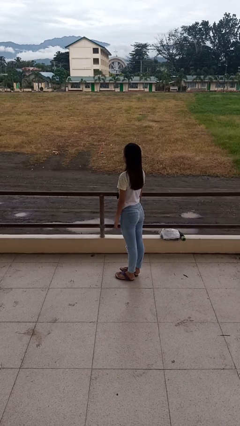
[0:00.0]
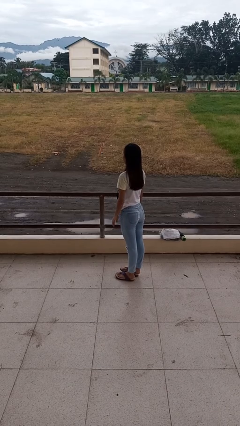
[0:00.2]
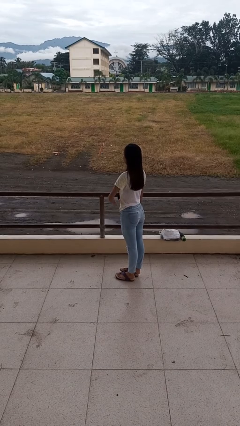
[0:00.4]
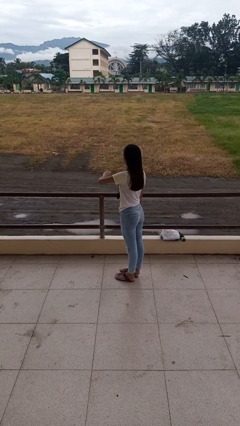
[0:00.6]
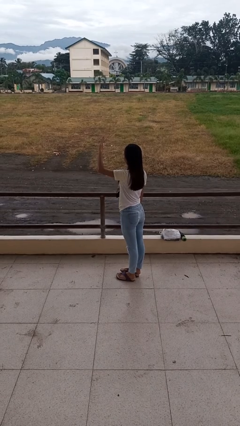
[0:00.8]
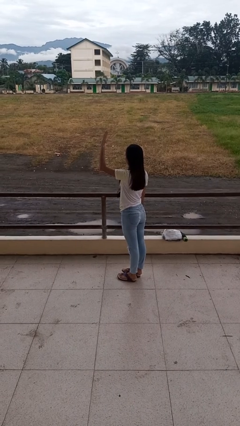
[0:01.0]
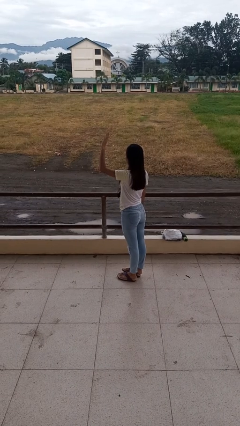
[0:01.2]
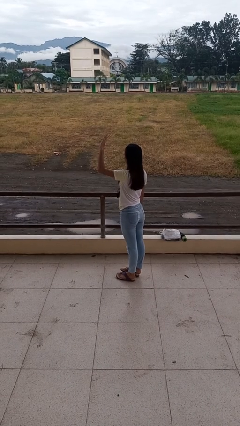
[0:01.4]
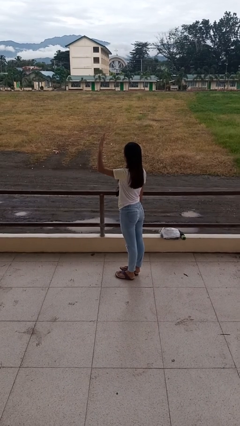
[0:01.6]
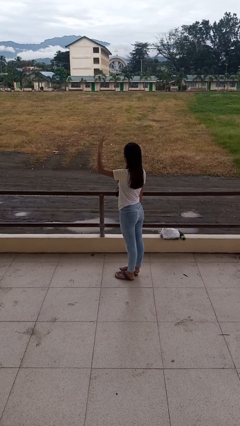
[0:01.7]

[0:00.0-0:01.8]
person gestures swipe up

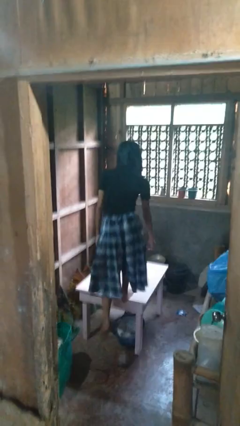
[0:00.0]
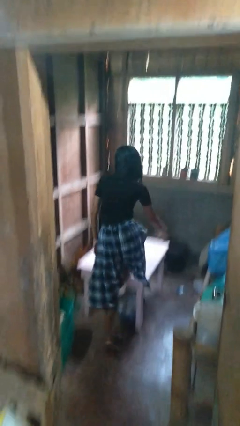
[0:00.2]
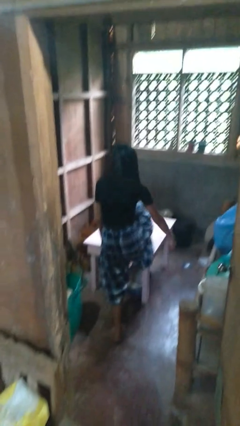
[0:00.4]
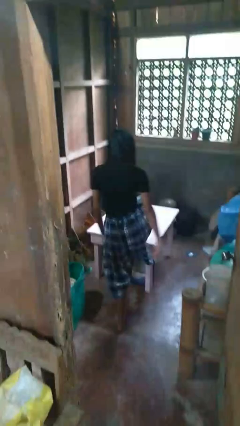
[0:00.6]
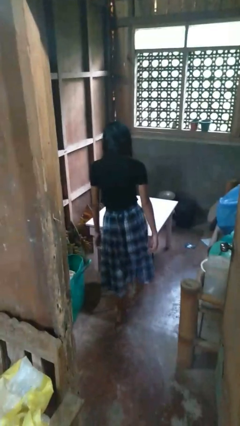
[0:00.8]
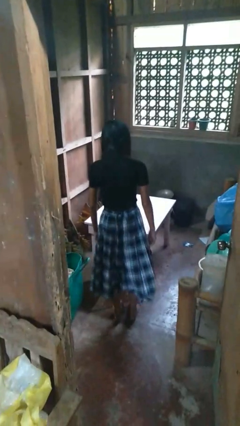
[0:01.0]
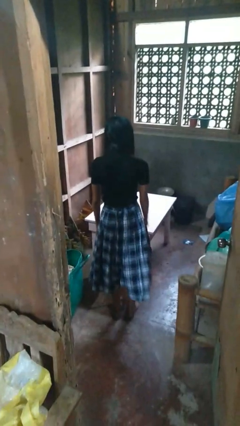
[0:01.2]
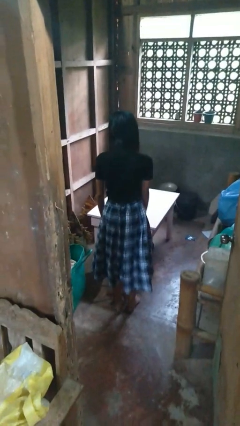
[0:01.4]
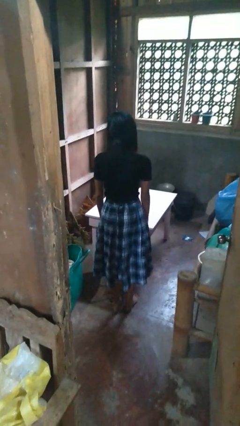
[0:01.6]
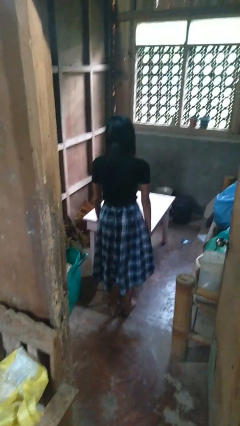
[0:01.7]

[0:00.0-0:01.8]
person climbs off table

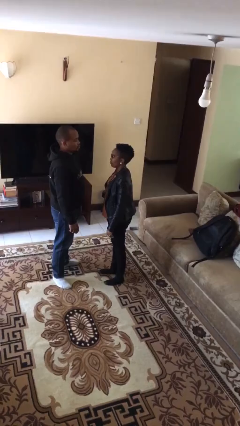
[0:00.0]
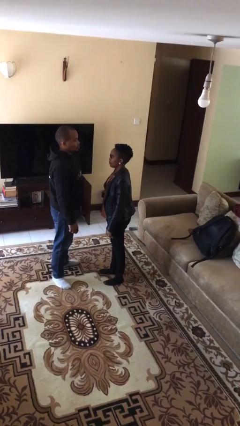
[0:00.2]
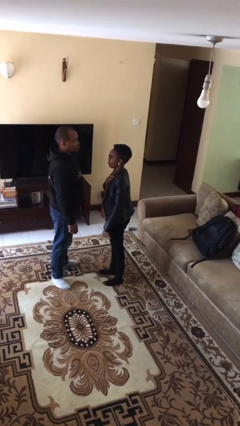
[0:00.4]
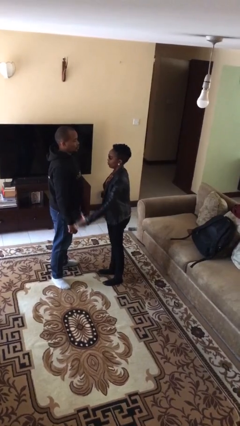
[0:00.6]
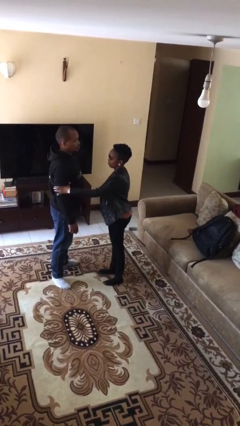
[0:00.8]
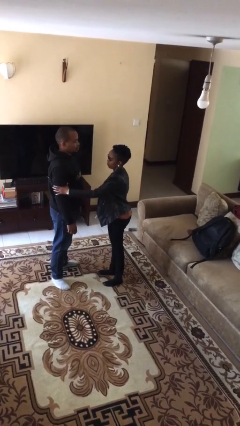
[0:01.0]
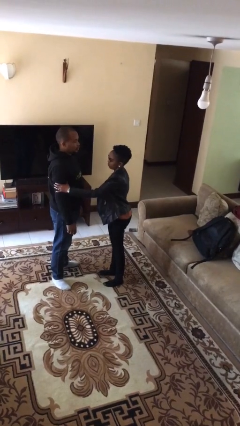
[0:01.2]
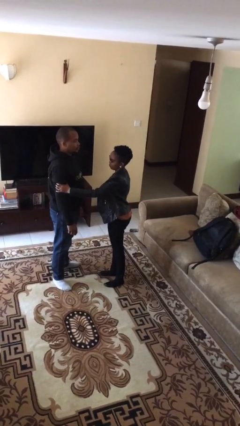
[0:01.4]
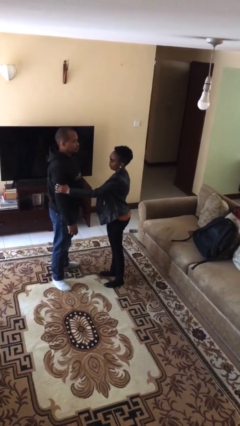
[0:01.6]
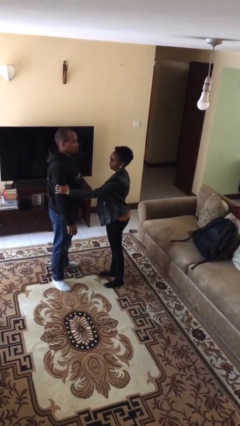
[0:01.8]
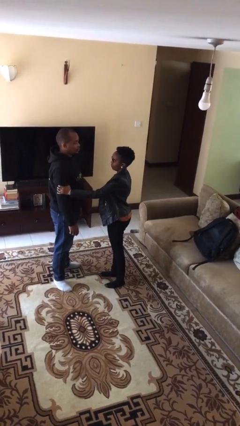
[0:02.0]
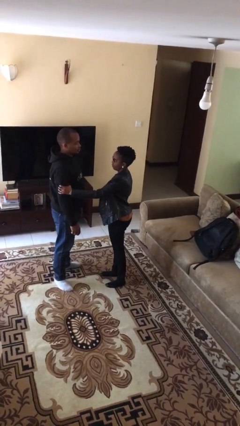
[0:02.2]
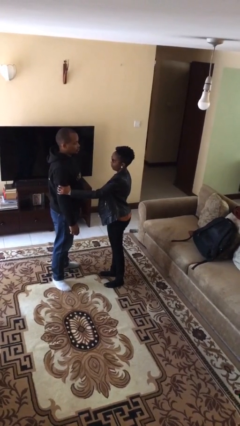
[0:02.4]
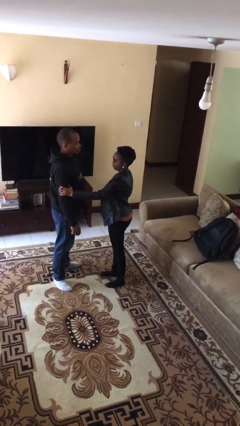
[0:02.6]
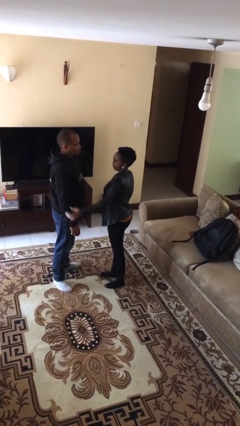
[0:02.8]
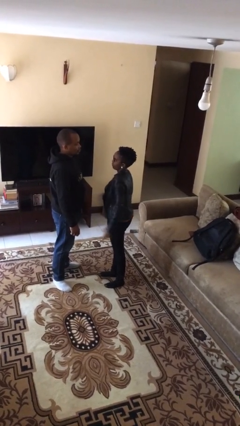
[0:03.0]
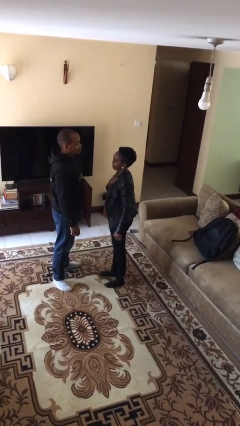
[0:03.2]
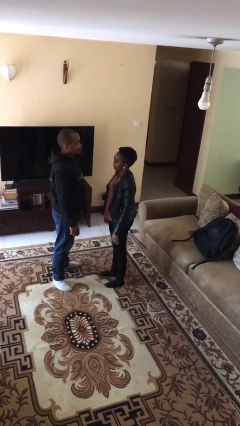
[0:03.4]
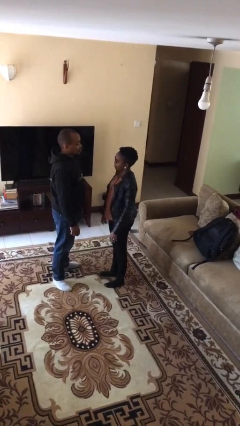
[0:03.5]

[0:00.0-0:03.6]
person grabs person by bicep

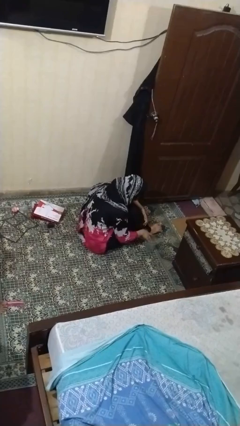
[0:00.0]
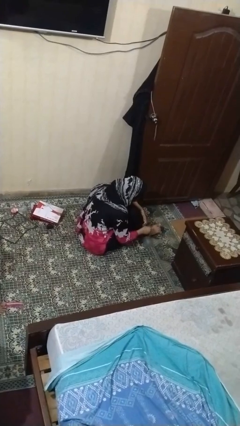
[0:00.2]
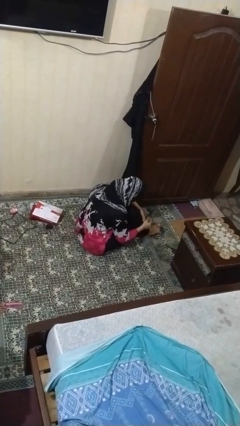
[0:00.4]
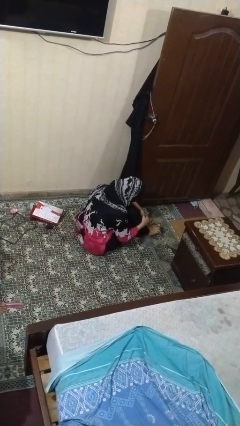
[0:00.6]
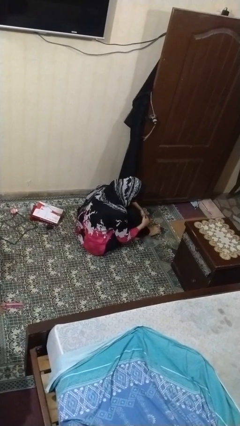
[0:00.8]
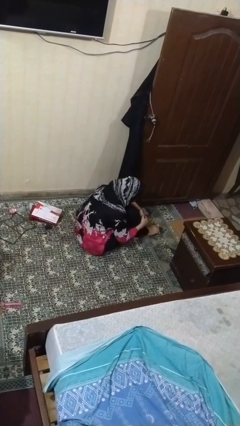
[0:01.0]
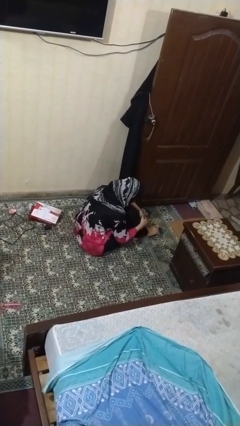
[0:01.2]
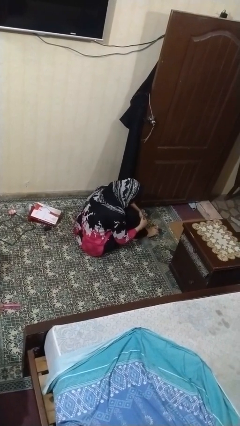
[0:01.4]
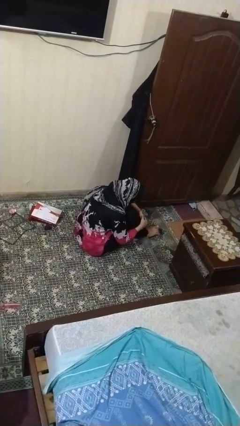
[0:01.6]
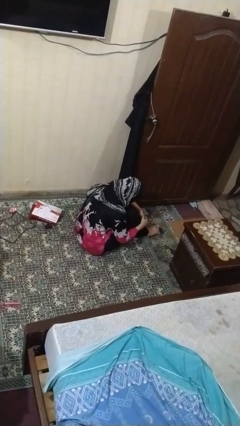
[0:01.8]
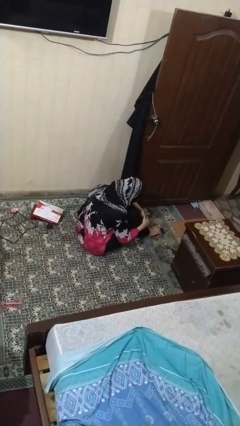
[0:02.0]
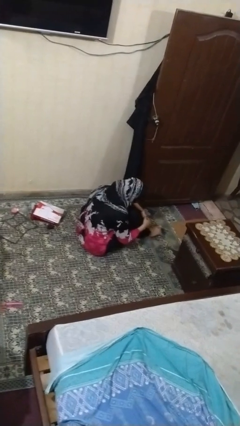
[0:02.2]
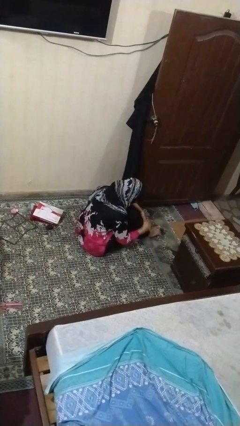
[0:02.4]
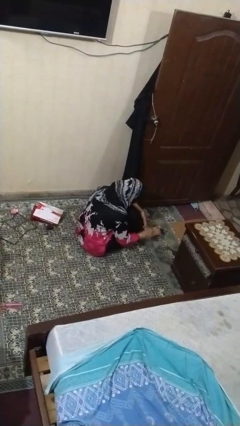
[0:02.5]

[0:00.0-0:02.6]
person spills on floor

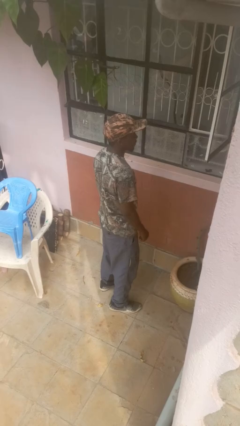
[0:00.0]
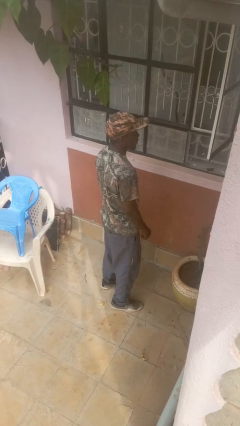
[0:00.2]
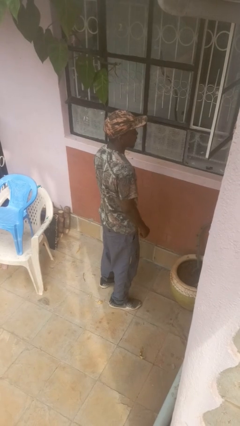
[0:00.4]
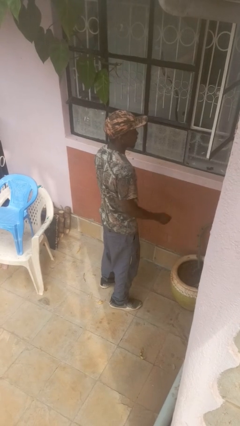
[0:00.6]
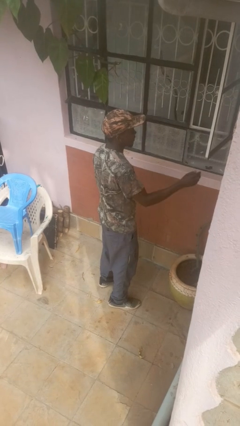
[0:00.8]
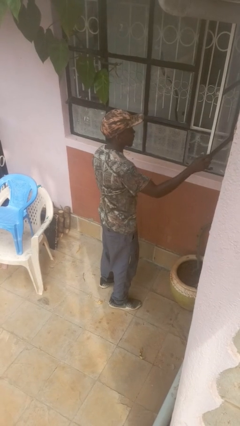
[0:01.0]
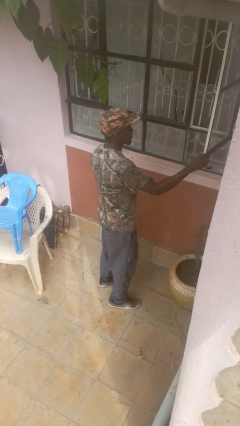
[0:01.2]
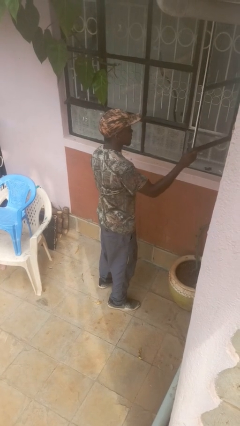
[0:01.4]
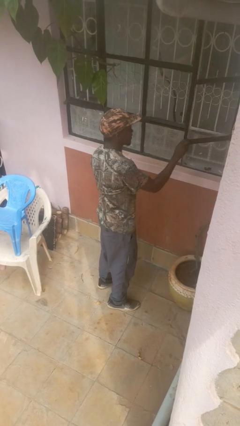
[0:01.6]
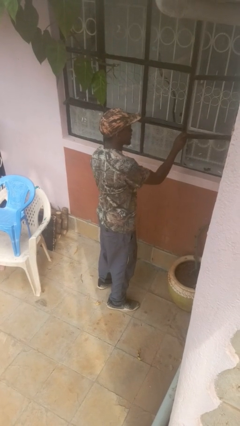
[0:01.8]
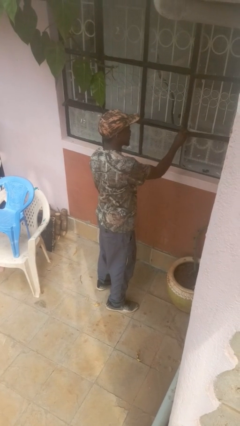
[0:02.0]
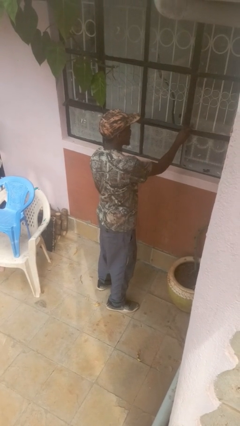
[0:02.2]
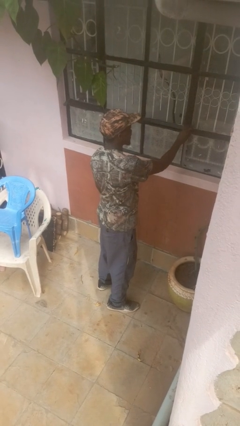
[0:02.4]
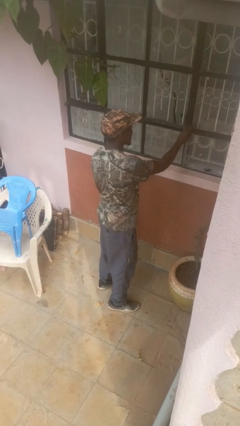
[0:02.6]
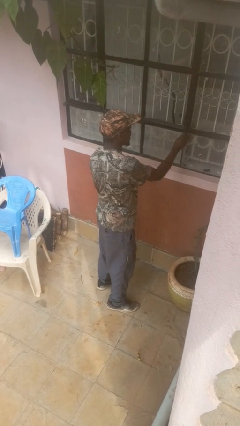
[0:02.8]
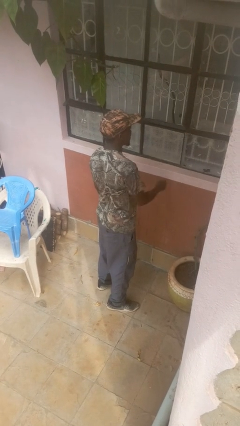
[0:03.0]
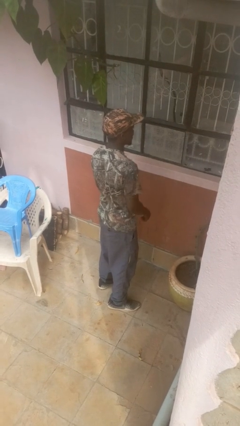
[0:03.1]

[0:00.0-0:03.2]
person closes home window

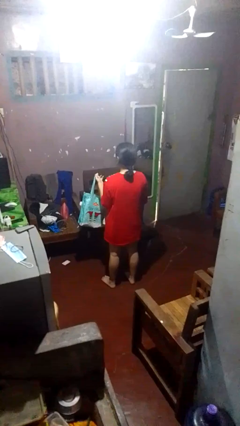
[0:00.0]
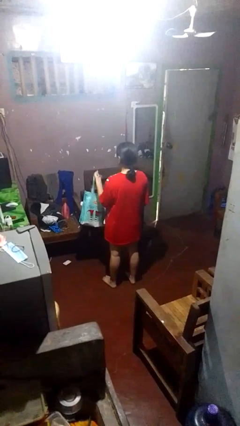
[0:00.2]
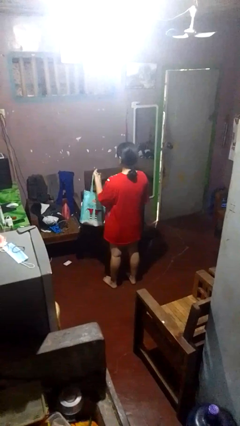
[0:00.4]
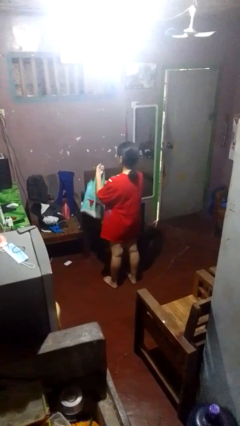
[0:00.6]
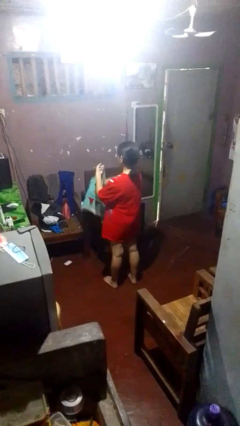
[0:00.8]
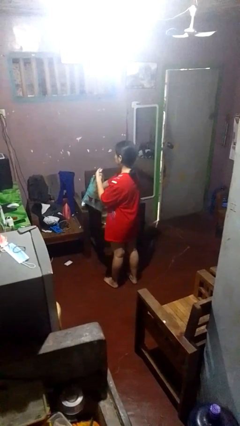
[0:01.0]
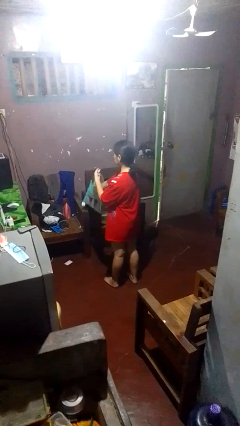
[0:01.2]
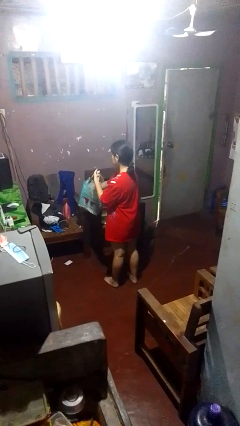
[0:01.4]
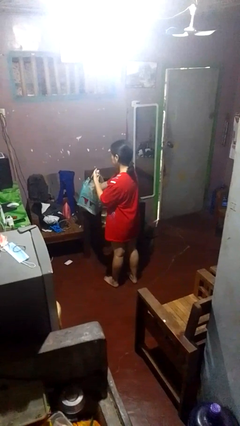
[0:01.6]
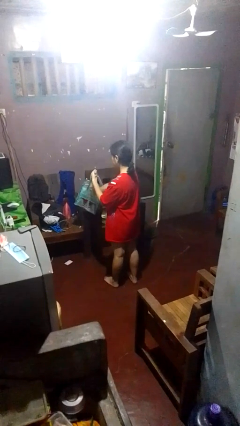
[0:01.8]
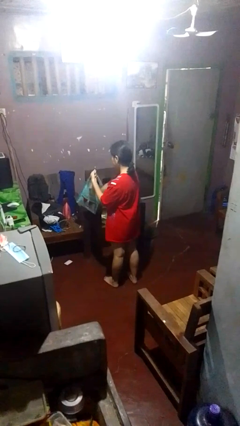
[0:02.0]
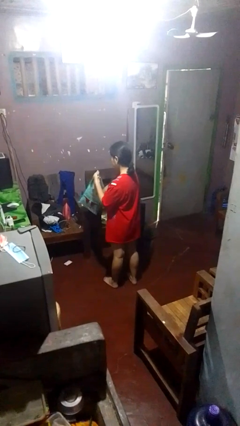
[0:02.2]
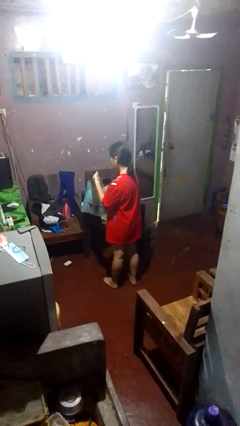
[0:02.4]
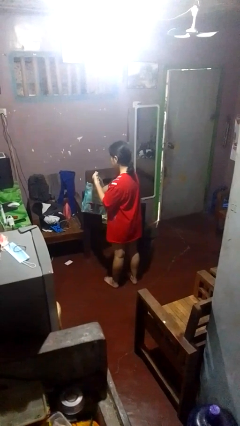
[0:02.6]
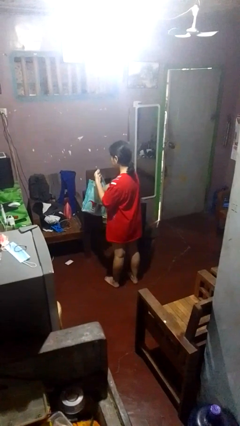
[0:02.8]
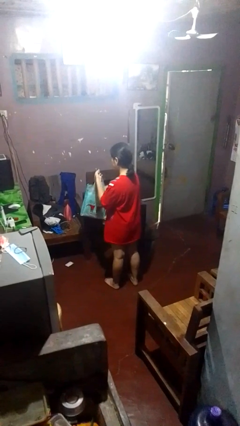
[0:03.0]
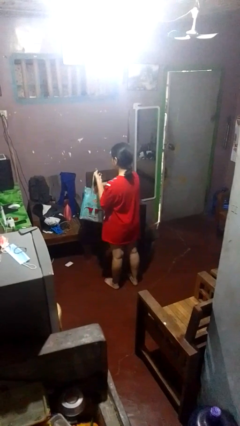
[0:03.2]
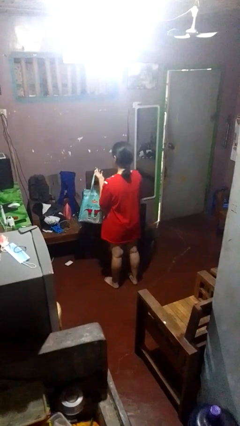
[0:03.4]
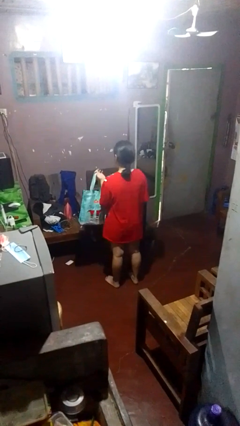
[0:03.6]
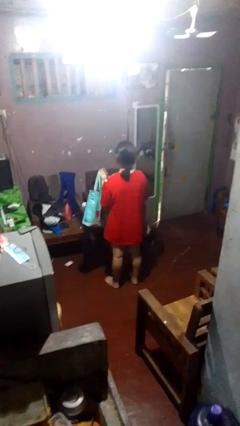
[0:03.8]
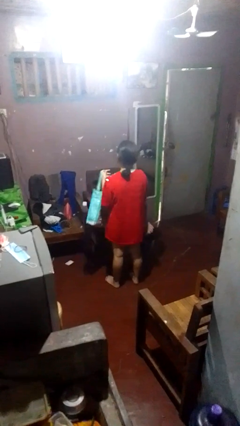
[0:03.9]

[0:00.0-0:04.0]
person searches in bag

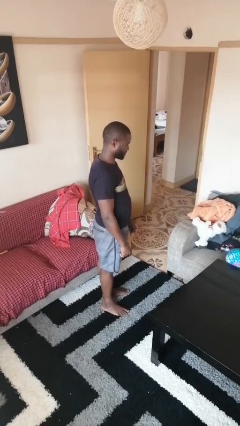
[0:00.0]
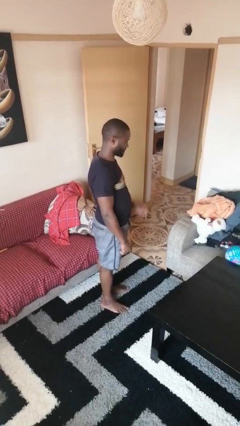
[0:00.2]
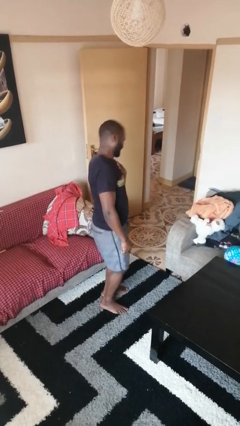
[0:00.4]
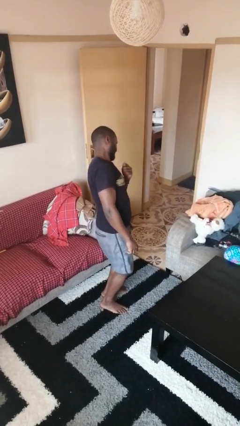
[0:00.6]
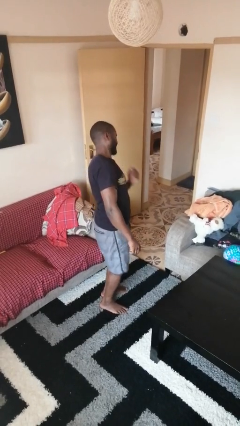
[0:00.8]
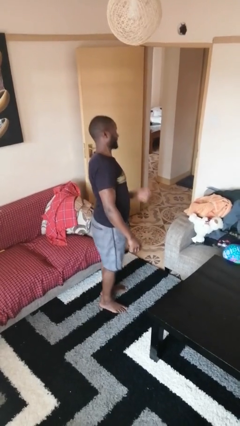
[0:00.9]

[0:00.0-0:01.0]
person swats bug
